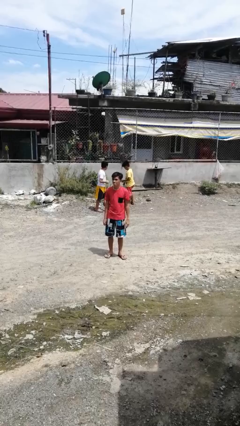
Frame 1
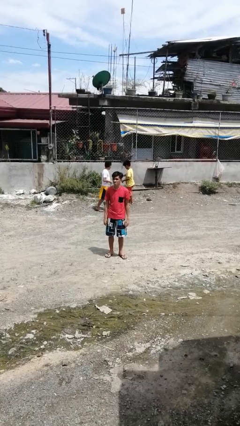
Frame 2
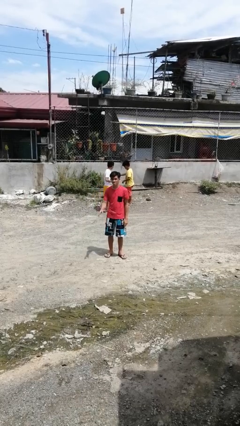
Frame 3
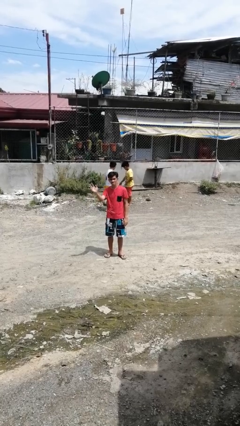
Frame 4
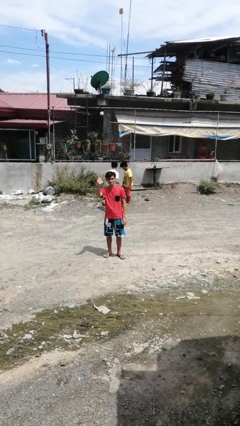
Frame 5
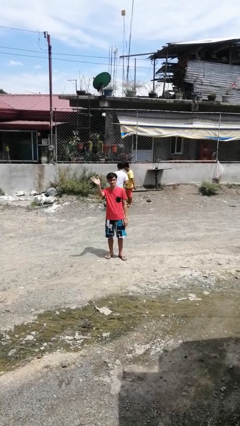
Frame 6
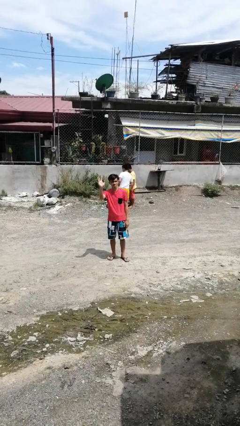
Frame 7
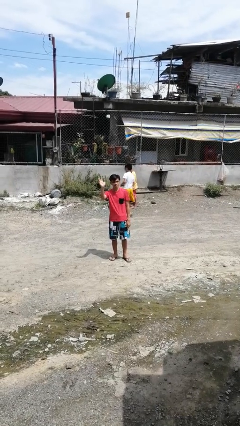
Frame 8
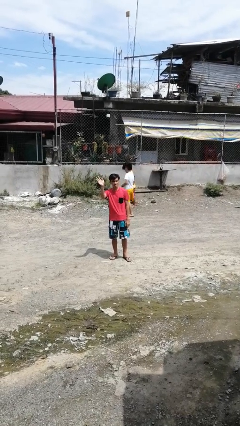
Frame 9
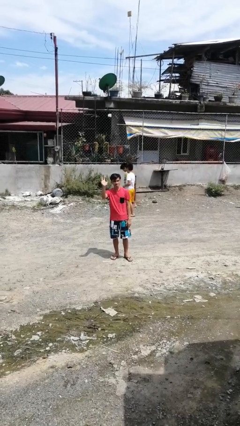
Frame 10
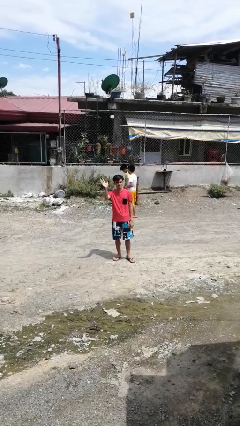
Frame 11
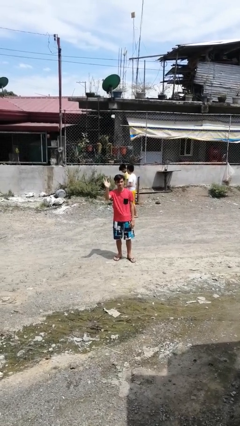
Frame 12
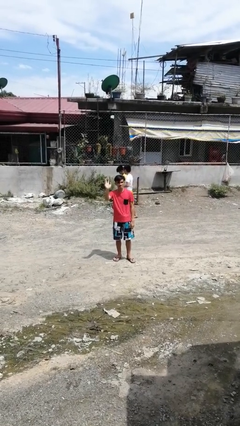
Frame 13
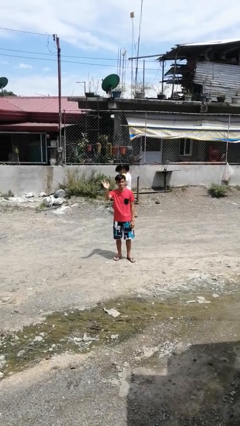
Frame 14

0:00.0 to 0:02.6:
person waves at person

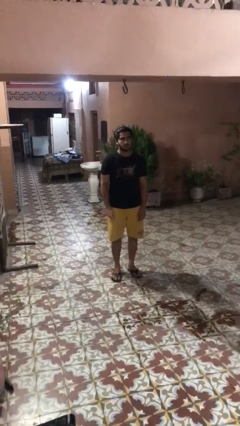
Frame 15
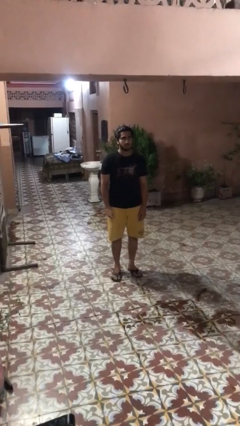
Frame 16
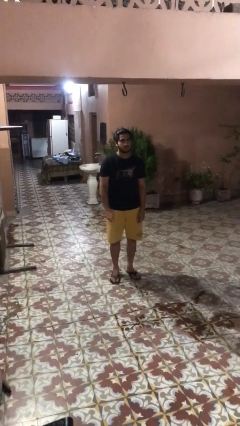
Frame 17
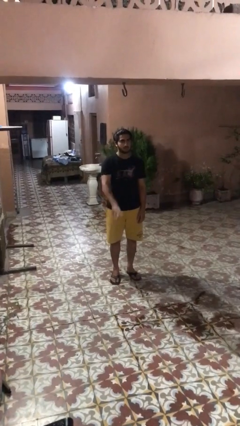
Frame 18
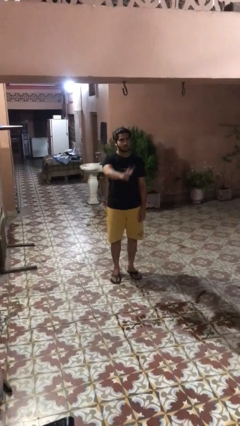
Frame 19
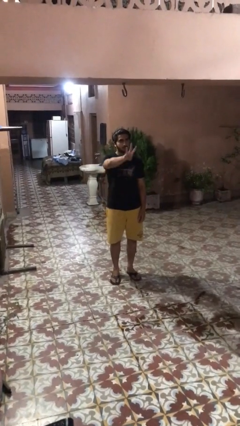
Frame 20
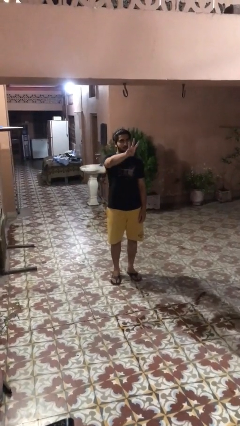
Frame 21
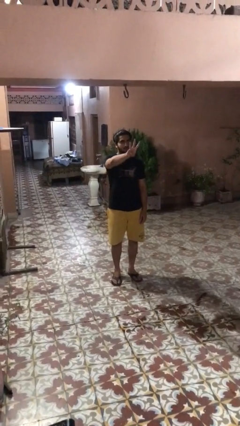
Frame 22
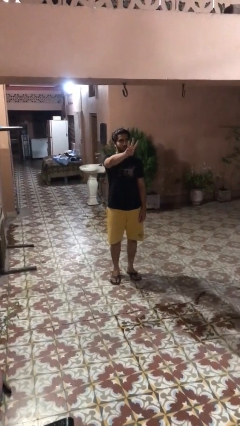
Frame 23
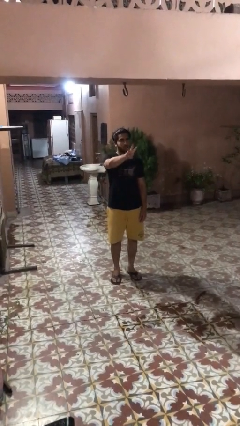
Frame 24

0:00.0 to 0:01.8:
person gestures number three

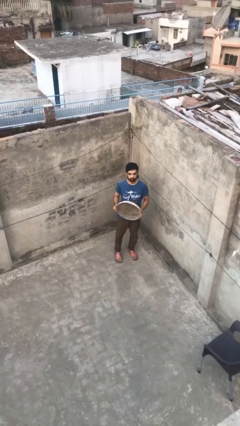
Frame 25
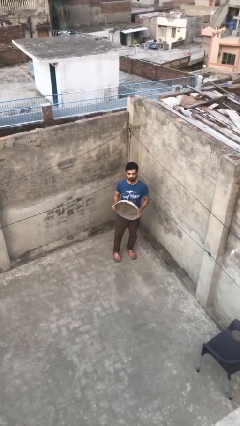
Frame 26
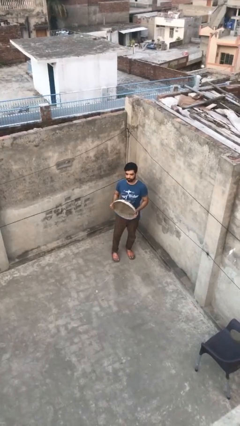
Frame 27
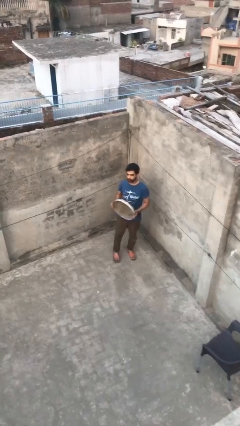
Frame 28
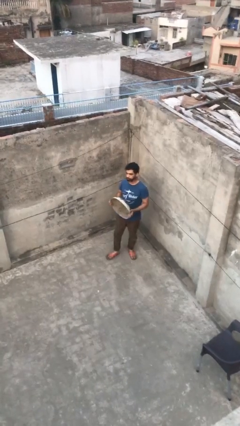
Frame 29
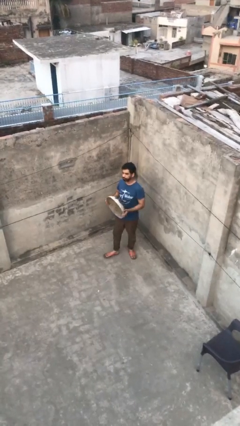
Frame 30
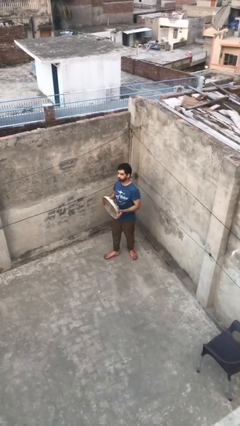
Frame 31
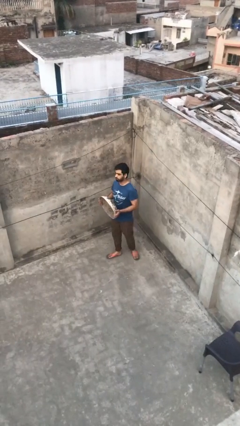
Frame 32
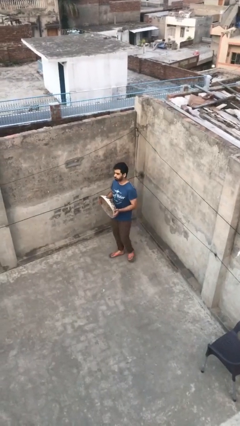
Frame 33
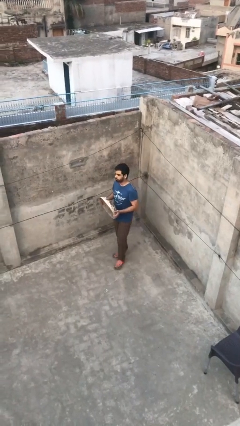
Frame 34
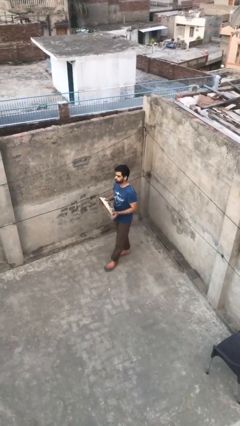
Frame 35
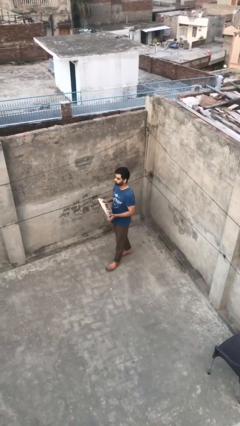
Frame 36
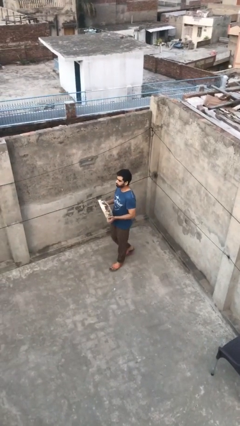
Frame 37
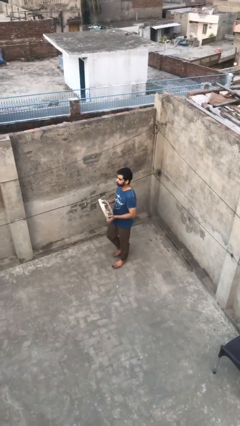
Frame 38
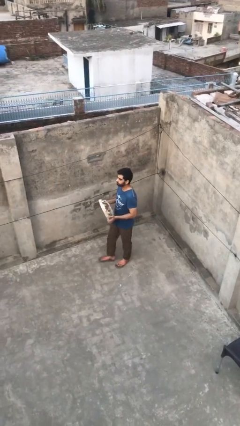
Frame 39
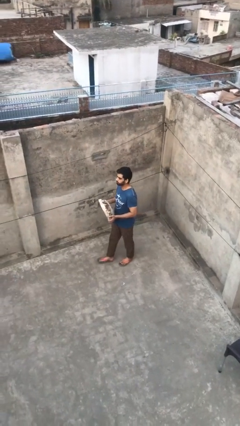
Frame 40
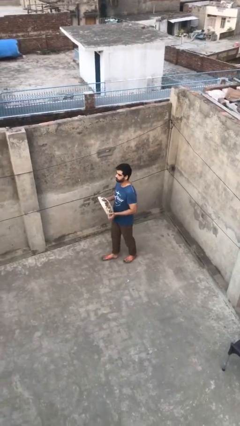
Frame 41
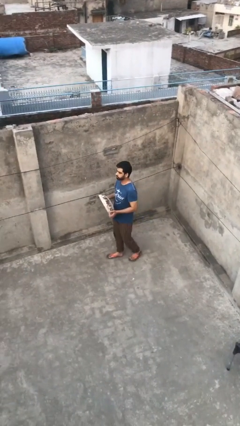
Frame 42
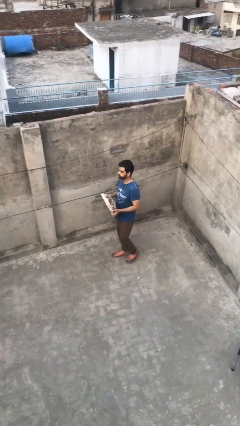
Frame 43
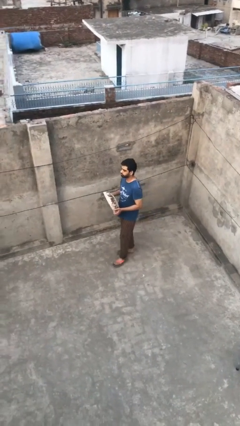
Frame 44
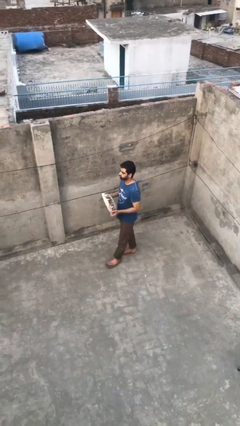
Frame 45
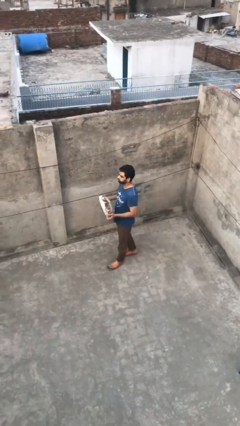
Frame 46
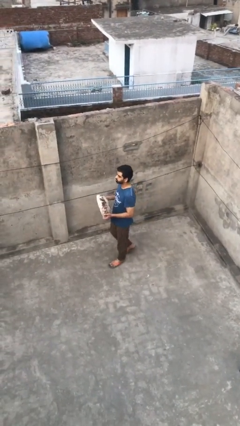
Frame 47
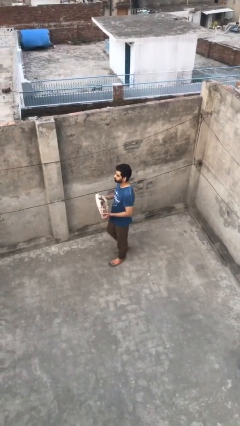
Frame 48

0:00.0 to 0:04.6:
person carries heavy object

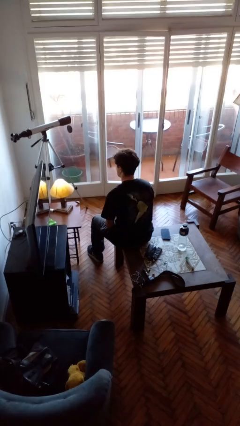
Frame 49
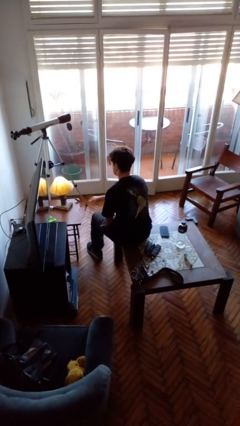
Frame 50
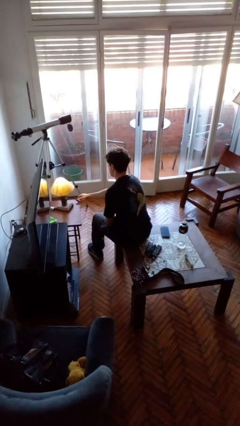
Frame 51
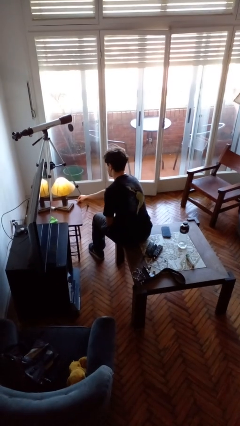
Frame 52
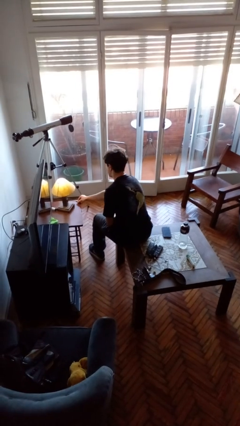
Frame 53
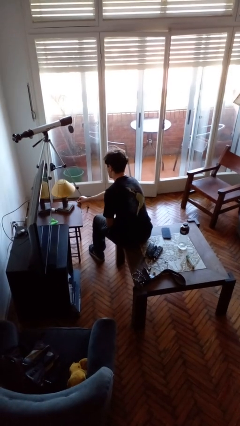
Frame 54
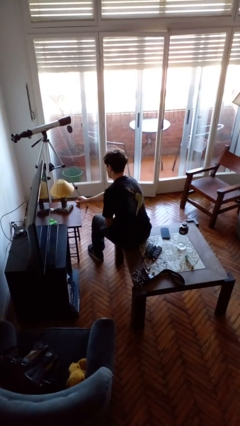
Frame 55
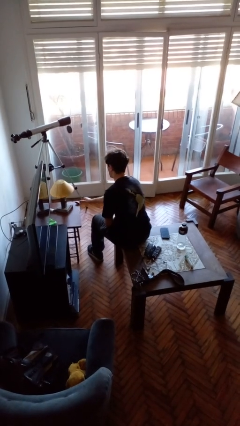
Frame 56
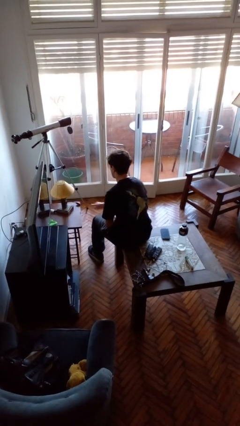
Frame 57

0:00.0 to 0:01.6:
person turns off lamp

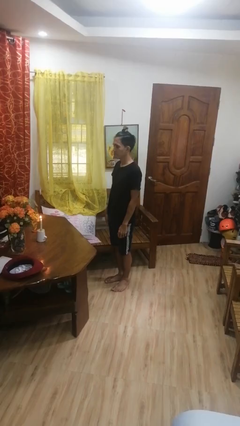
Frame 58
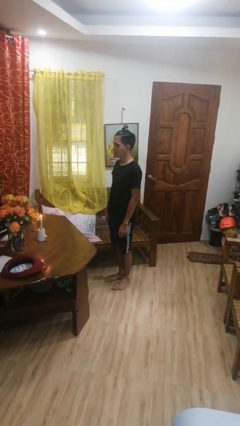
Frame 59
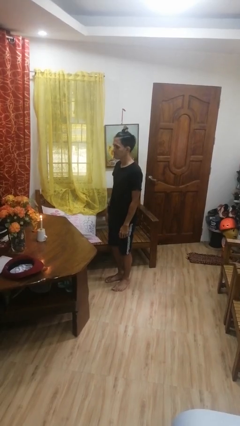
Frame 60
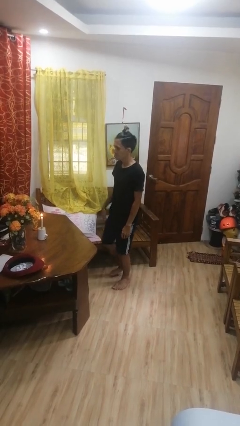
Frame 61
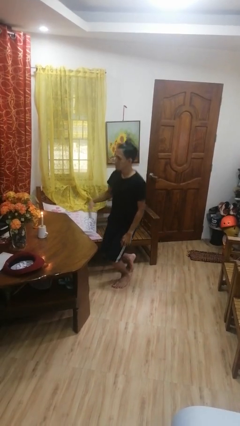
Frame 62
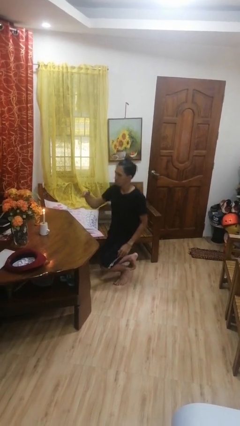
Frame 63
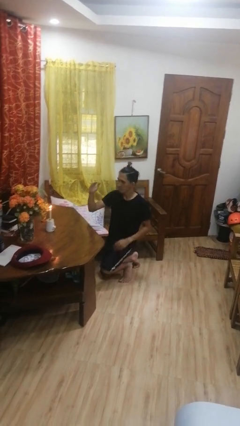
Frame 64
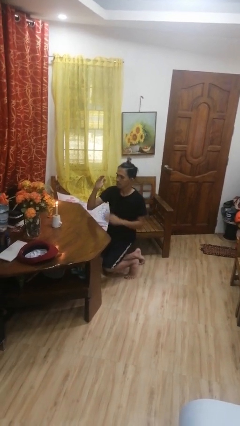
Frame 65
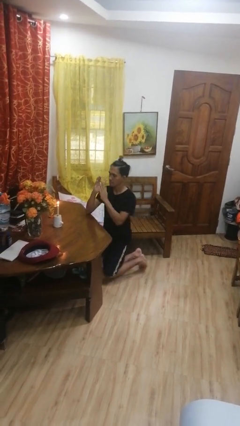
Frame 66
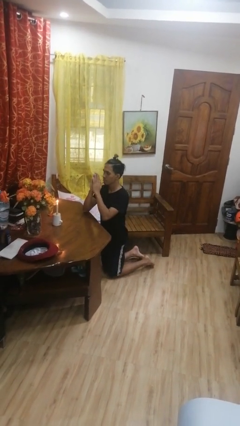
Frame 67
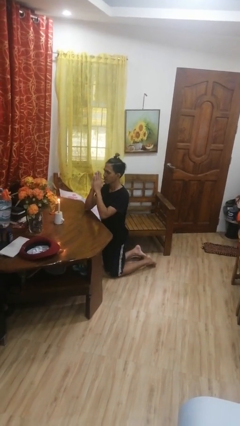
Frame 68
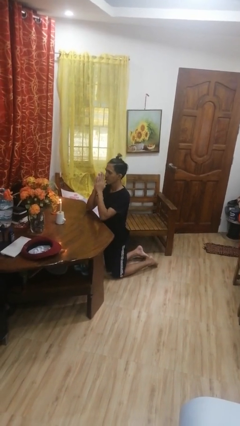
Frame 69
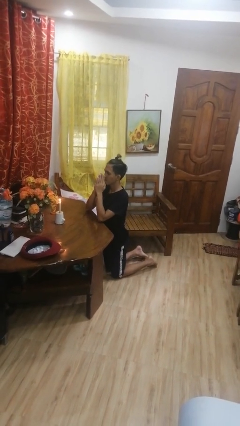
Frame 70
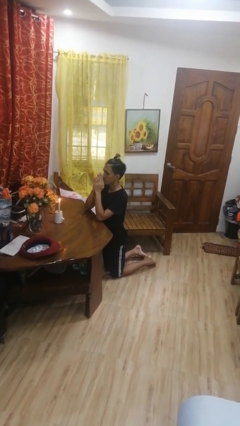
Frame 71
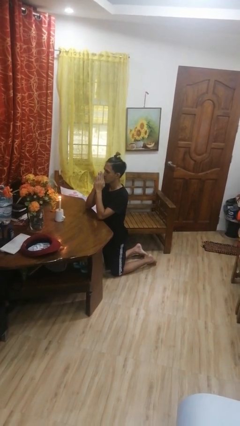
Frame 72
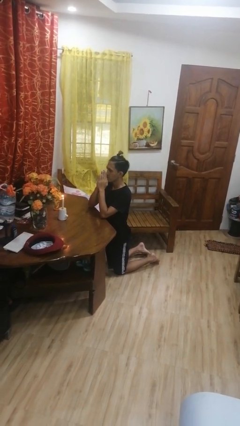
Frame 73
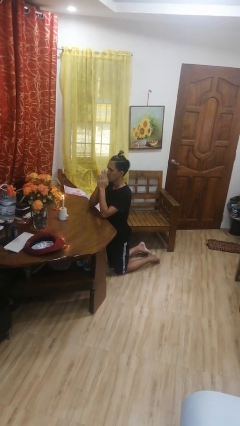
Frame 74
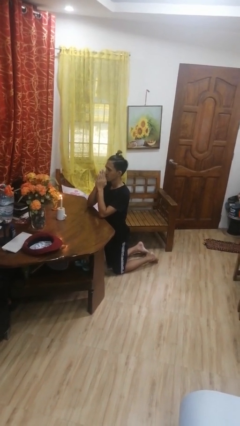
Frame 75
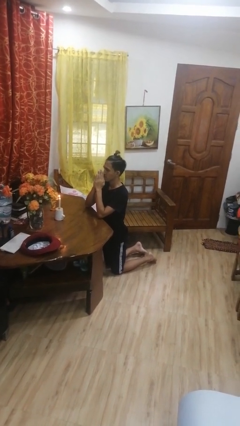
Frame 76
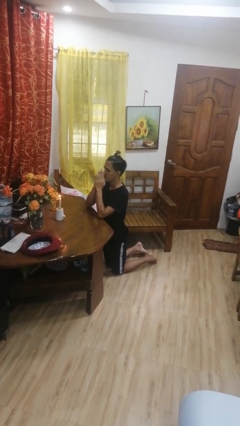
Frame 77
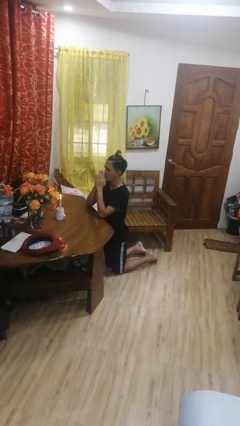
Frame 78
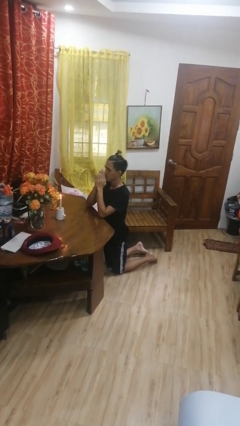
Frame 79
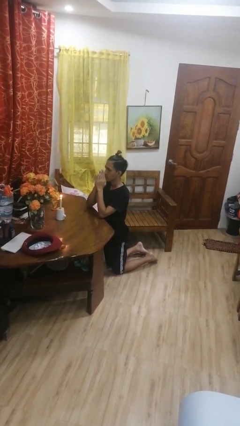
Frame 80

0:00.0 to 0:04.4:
person prays

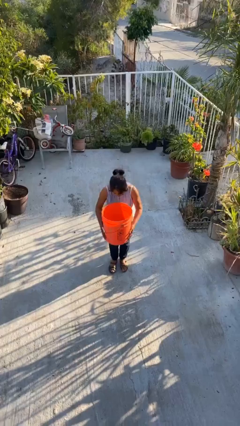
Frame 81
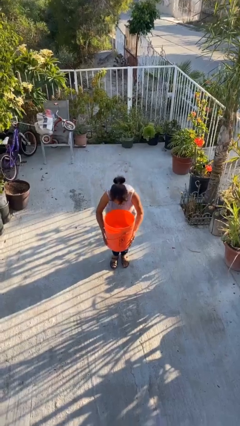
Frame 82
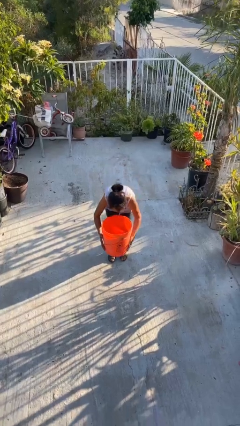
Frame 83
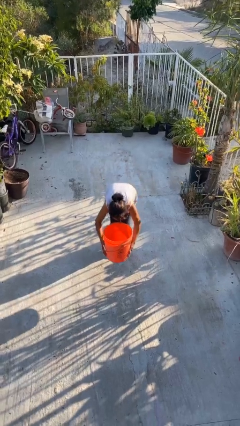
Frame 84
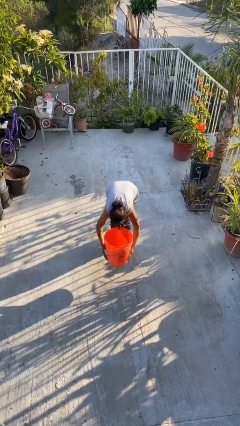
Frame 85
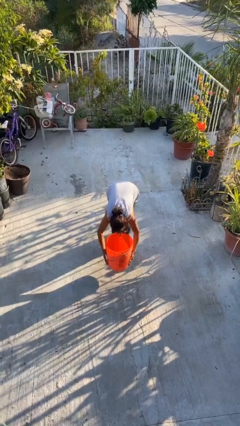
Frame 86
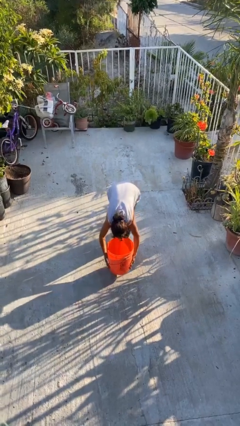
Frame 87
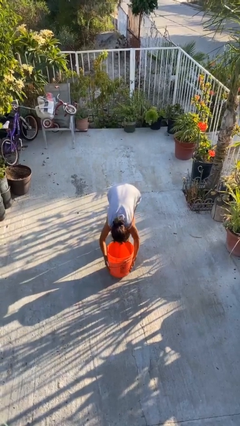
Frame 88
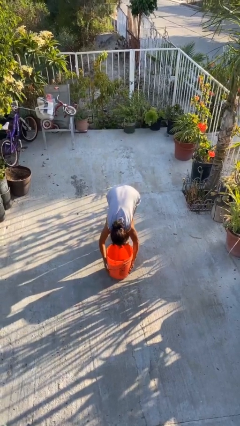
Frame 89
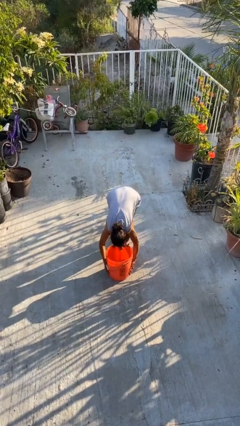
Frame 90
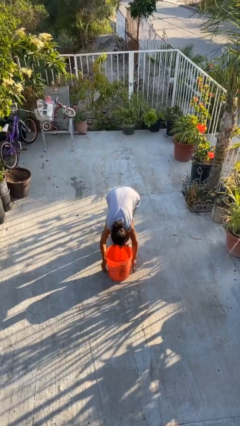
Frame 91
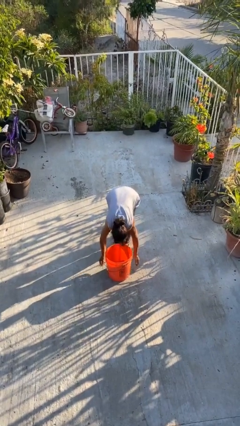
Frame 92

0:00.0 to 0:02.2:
person puts down object on floor

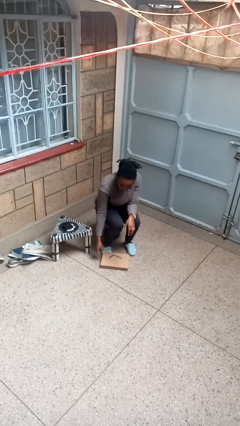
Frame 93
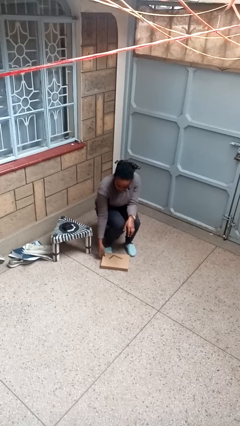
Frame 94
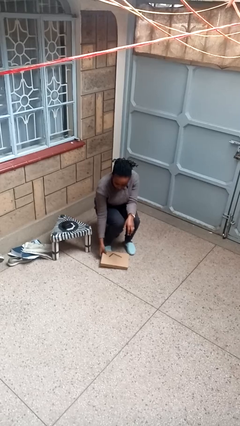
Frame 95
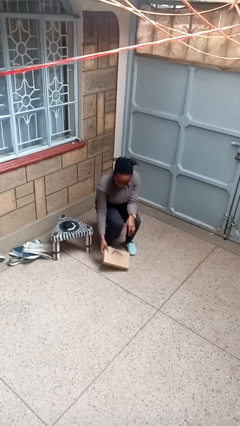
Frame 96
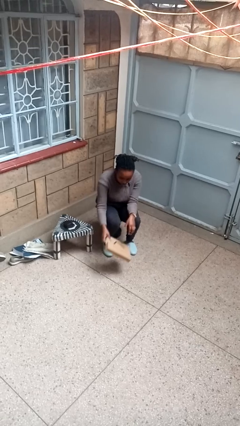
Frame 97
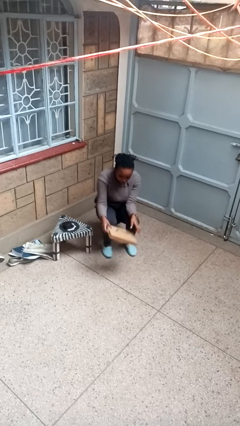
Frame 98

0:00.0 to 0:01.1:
person picks up object from floor
